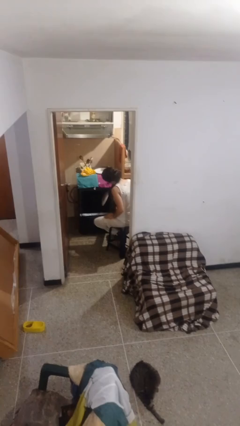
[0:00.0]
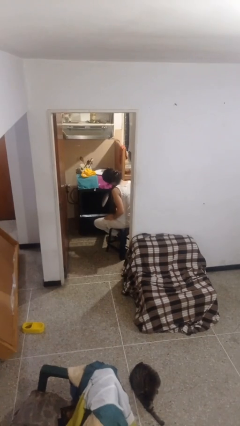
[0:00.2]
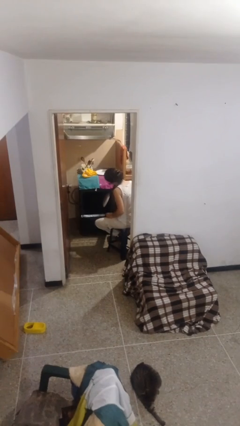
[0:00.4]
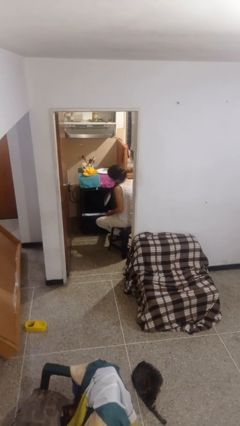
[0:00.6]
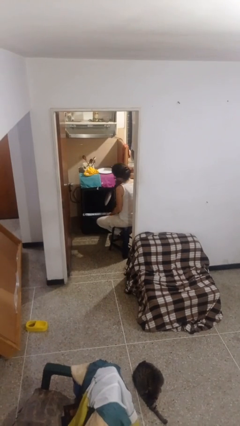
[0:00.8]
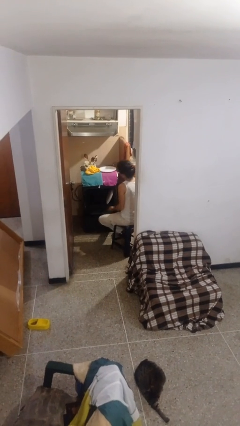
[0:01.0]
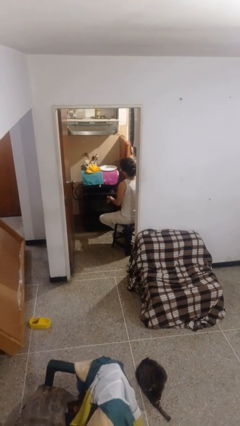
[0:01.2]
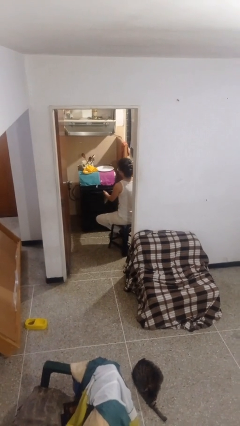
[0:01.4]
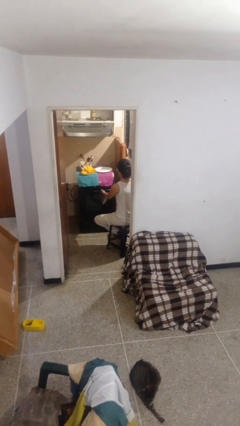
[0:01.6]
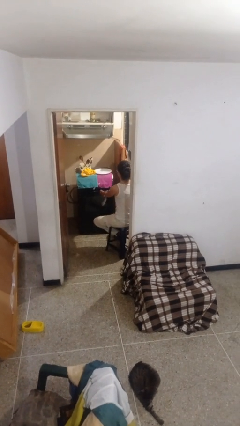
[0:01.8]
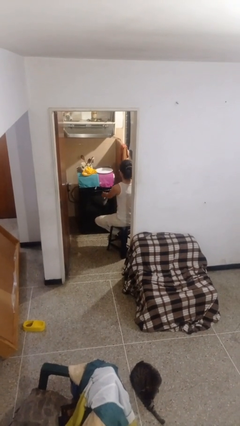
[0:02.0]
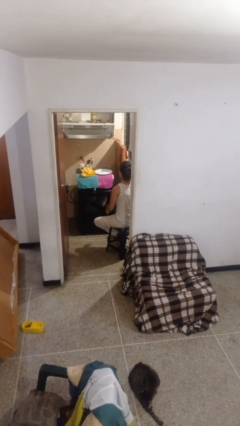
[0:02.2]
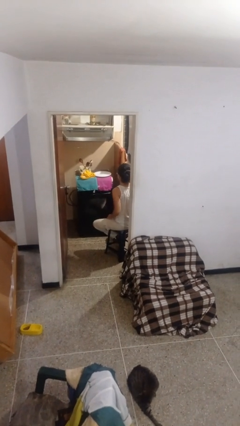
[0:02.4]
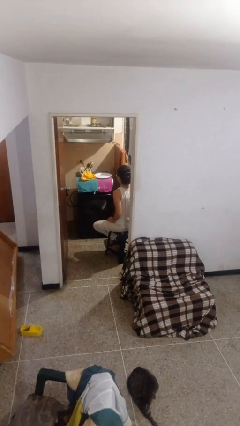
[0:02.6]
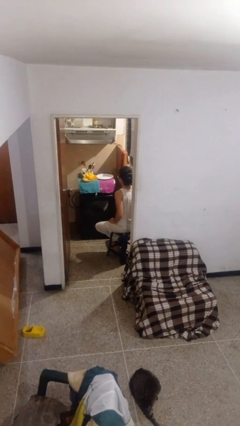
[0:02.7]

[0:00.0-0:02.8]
person closes dishwasher

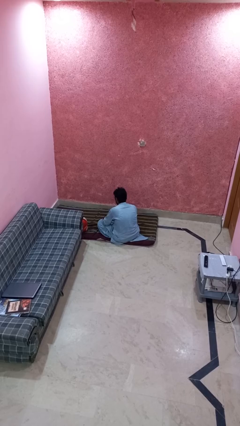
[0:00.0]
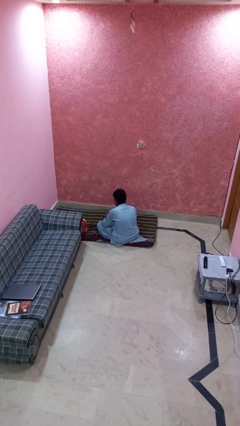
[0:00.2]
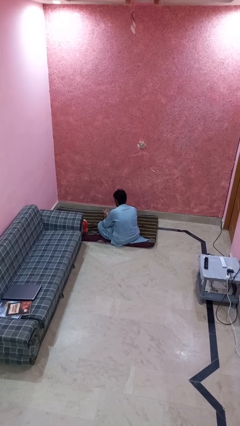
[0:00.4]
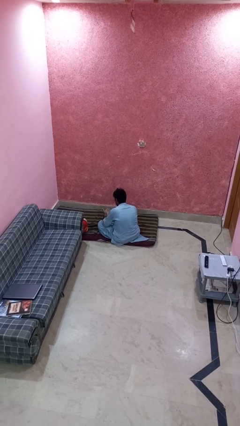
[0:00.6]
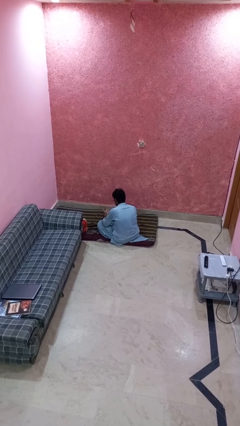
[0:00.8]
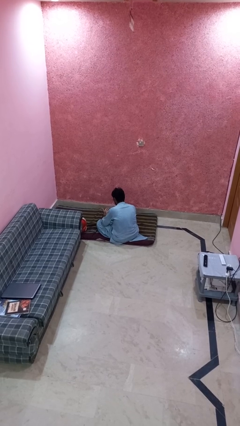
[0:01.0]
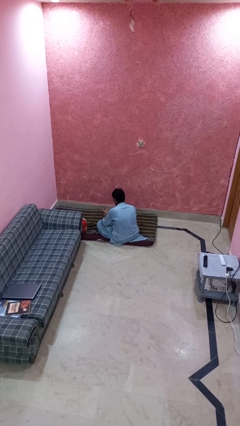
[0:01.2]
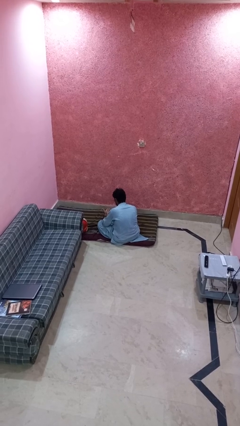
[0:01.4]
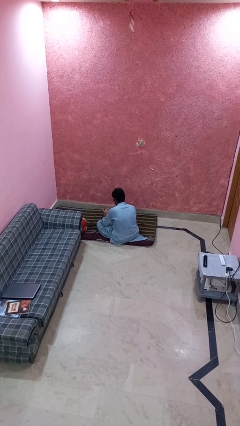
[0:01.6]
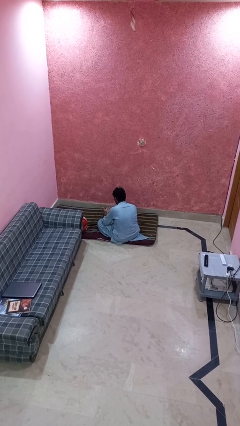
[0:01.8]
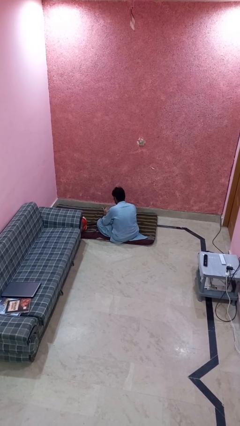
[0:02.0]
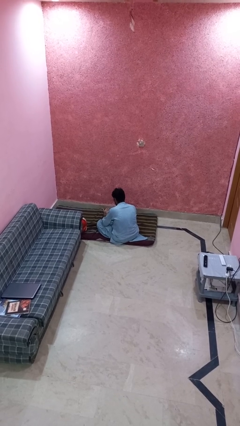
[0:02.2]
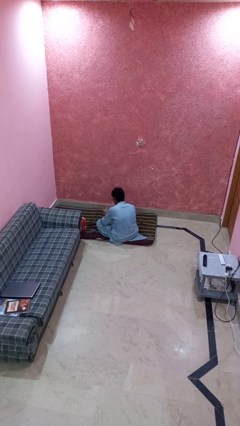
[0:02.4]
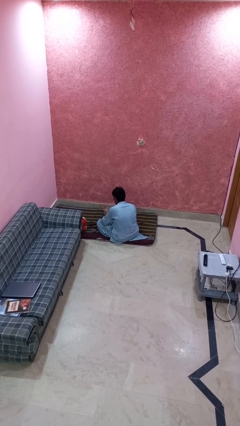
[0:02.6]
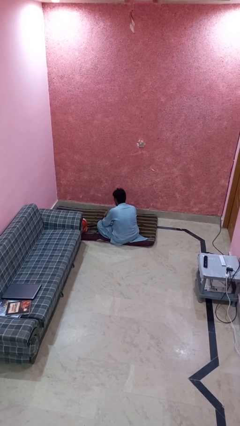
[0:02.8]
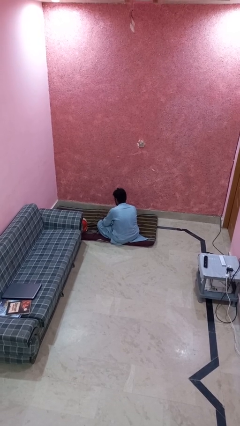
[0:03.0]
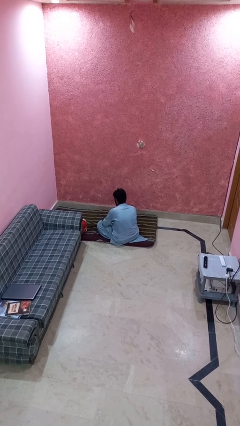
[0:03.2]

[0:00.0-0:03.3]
person looks at hands in lap

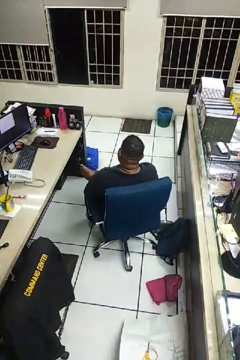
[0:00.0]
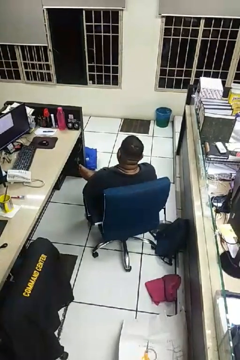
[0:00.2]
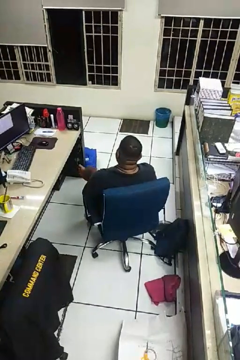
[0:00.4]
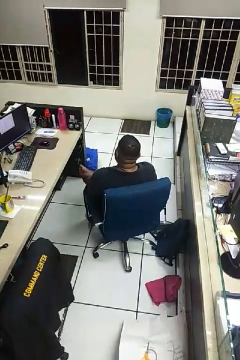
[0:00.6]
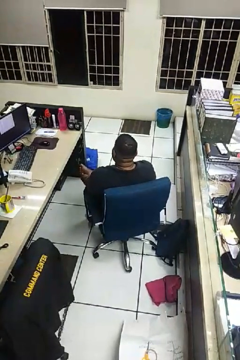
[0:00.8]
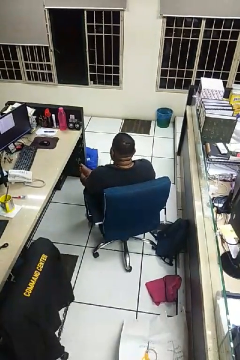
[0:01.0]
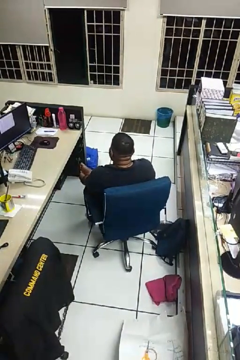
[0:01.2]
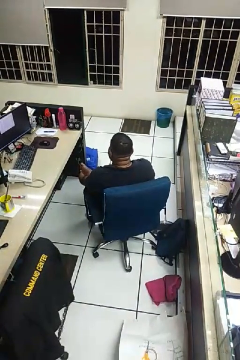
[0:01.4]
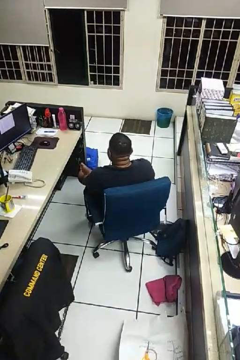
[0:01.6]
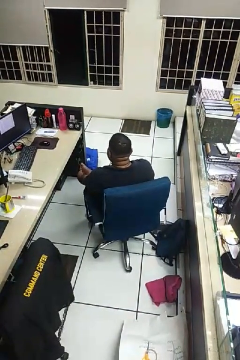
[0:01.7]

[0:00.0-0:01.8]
person rubs foot

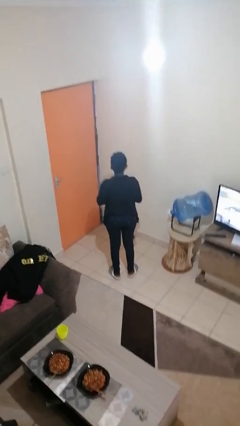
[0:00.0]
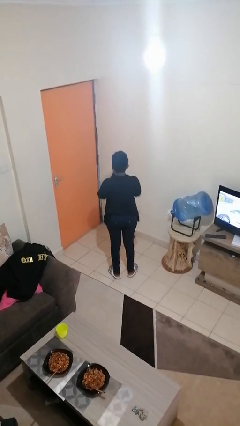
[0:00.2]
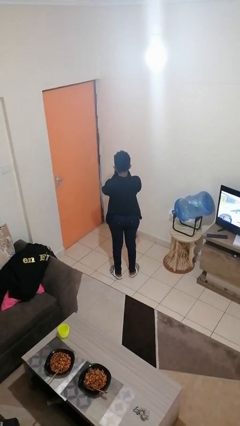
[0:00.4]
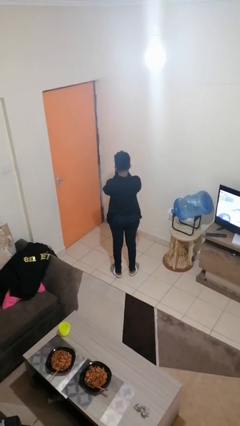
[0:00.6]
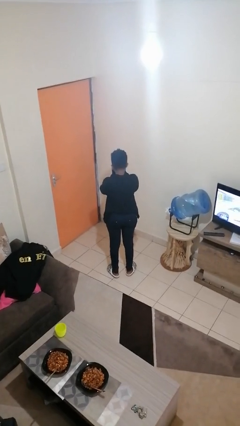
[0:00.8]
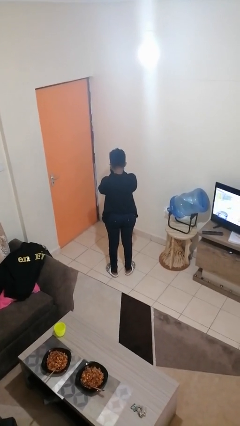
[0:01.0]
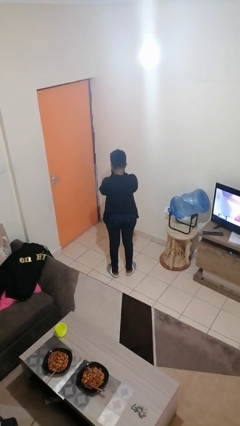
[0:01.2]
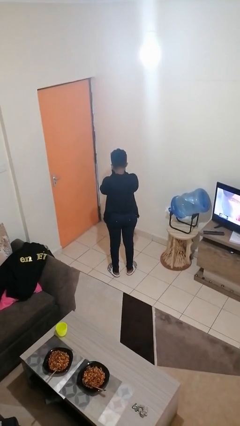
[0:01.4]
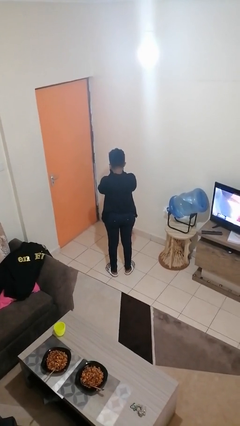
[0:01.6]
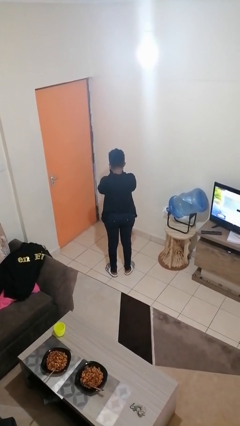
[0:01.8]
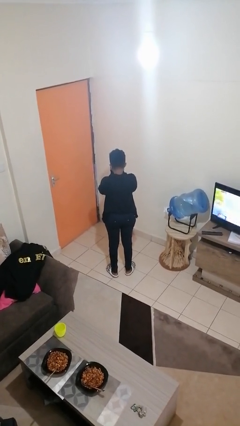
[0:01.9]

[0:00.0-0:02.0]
person covers face with hands

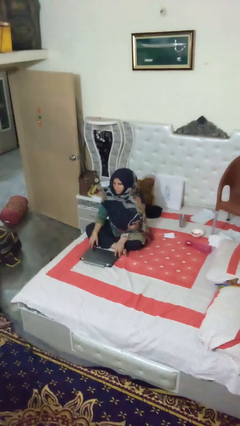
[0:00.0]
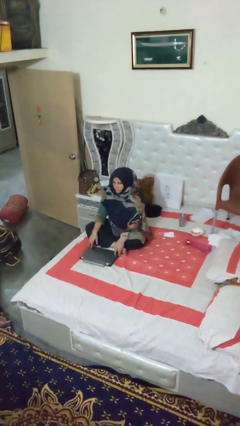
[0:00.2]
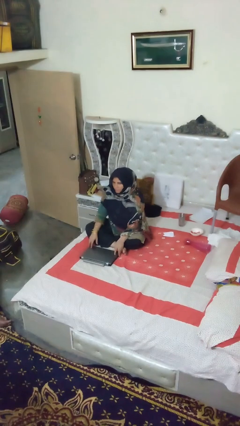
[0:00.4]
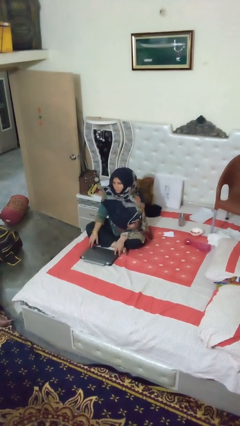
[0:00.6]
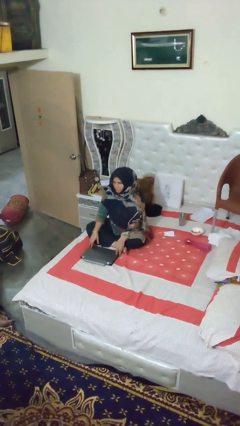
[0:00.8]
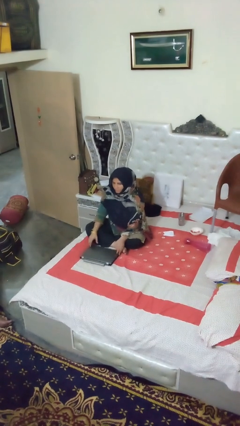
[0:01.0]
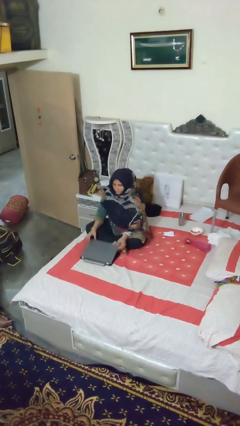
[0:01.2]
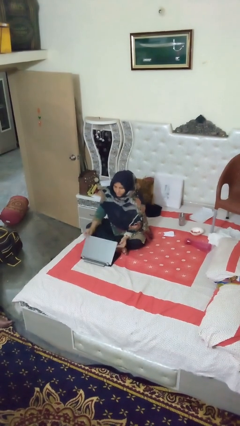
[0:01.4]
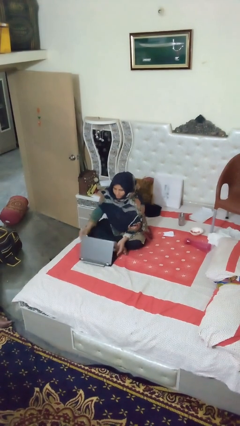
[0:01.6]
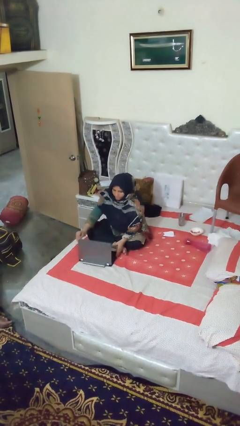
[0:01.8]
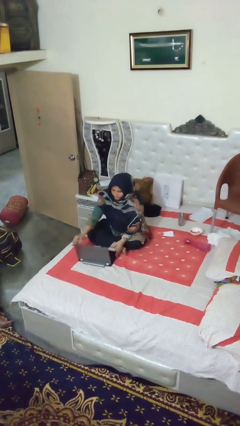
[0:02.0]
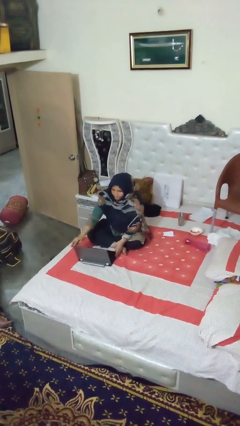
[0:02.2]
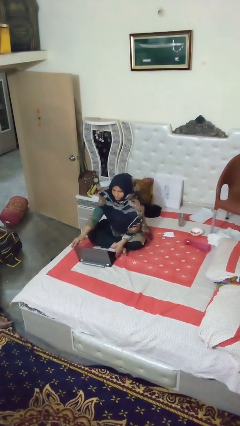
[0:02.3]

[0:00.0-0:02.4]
person opens laptop

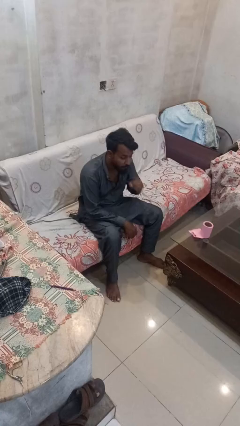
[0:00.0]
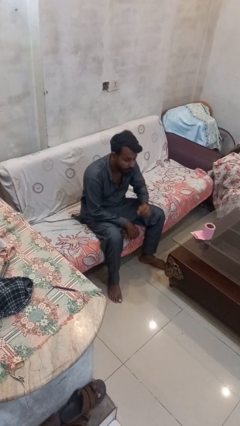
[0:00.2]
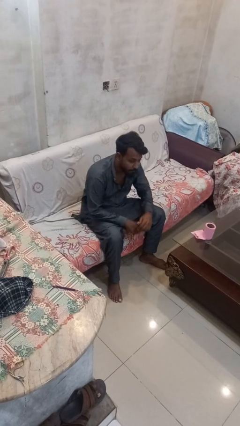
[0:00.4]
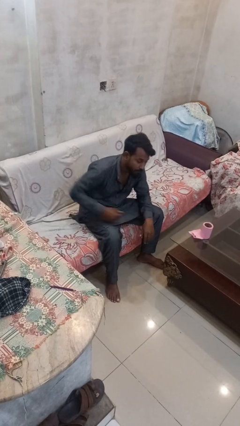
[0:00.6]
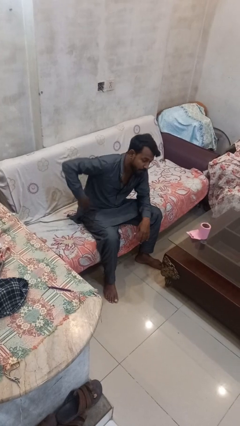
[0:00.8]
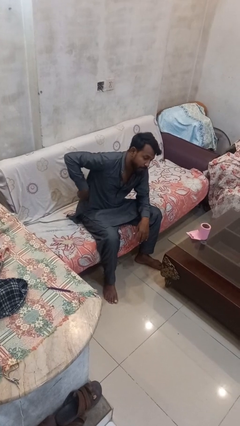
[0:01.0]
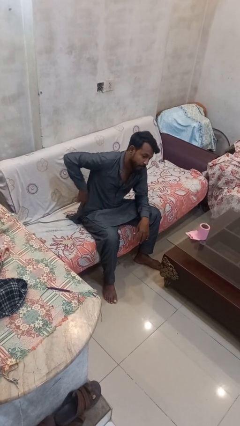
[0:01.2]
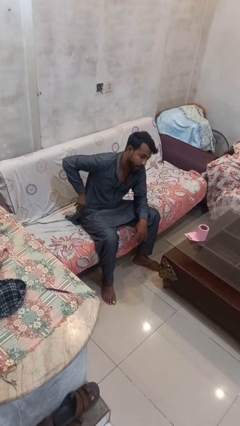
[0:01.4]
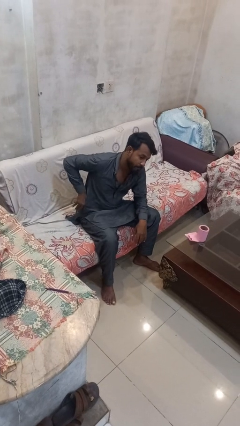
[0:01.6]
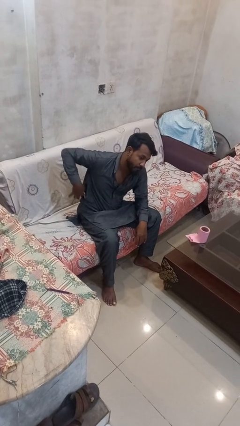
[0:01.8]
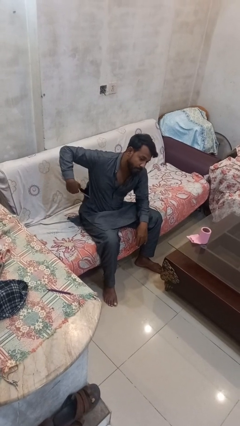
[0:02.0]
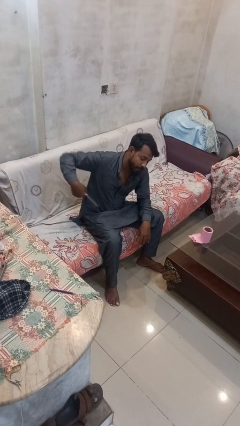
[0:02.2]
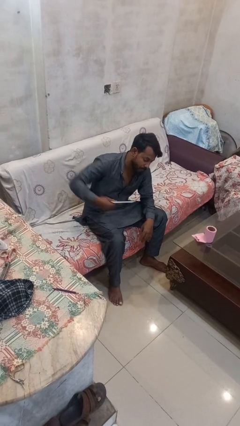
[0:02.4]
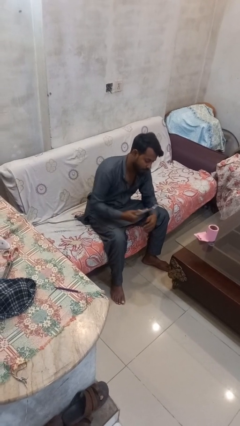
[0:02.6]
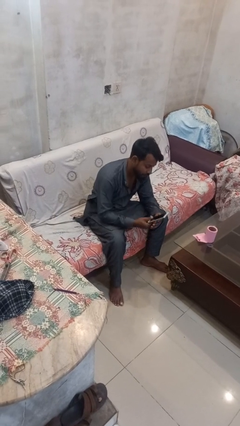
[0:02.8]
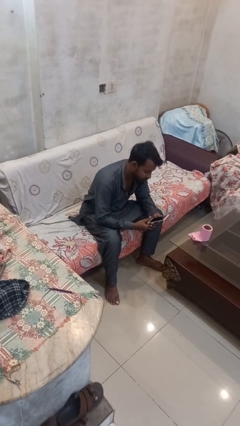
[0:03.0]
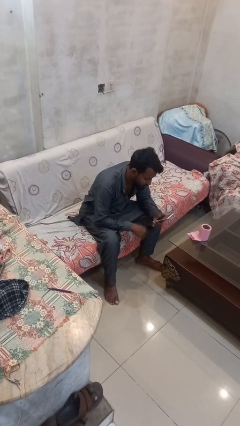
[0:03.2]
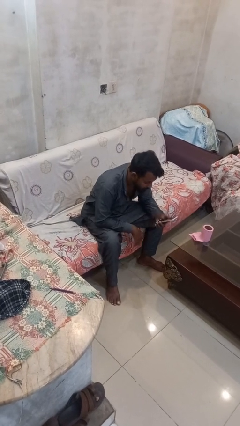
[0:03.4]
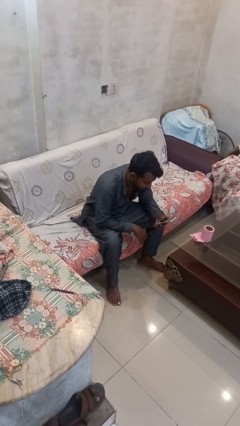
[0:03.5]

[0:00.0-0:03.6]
person takes phone from pocket

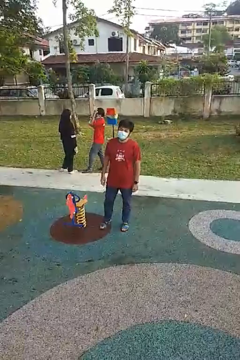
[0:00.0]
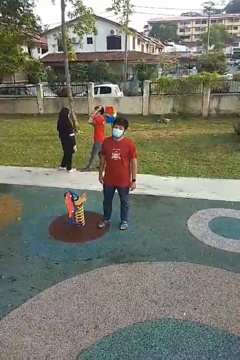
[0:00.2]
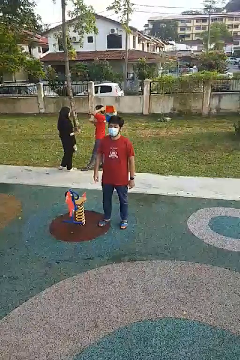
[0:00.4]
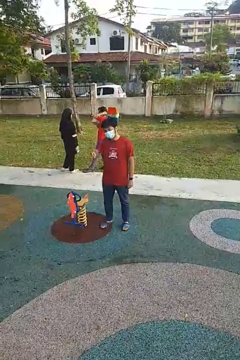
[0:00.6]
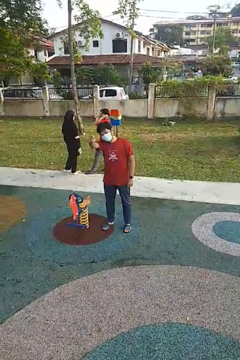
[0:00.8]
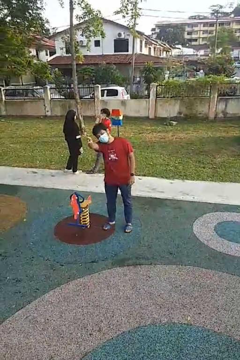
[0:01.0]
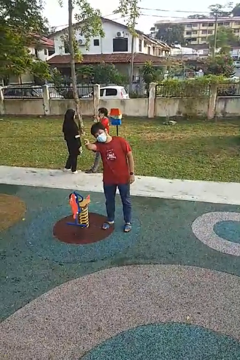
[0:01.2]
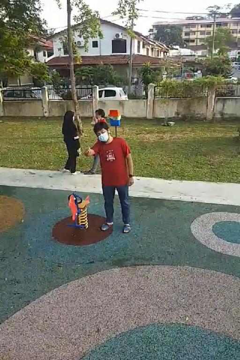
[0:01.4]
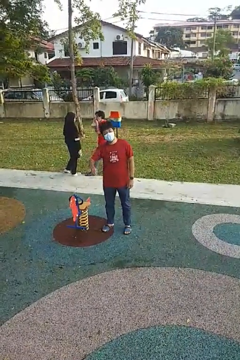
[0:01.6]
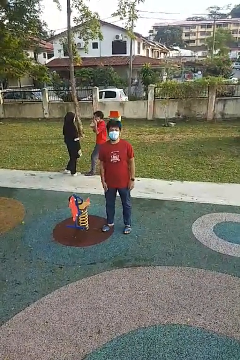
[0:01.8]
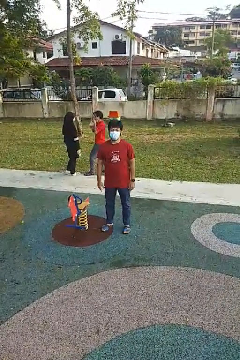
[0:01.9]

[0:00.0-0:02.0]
person points at person

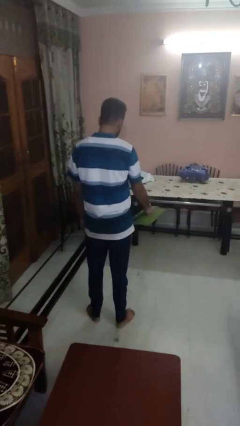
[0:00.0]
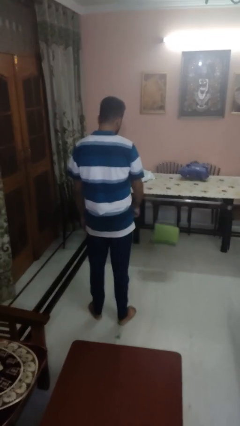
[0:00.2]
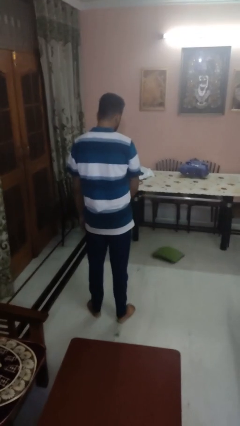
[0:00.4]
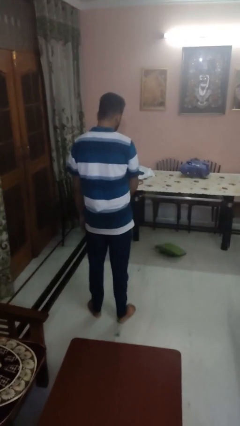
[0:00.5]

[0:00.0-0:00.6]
person throws object to ground
